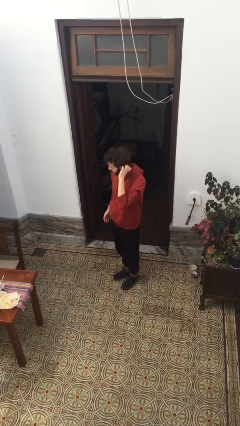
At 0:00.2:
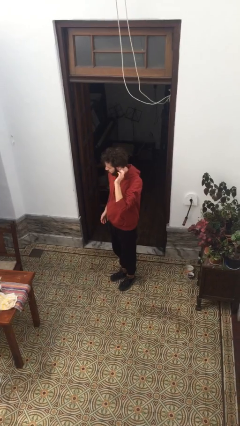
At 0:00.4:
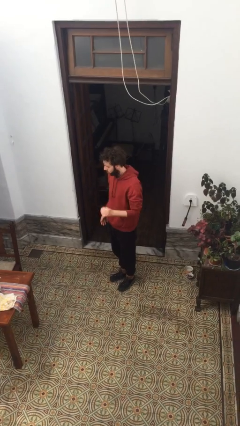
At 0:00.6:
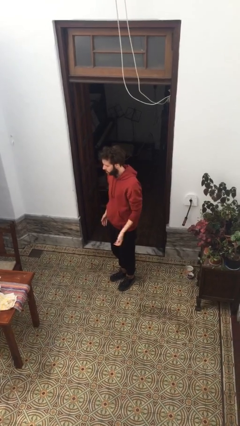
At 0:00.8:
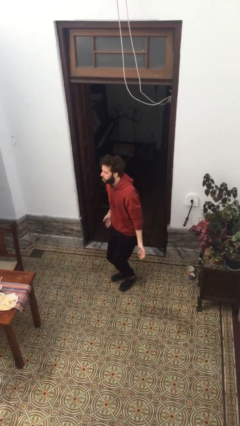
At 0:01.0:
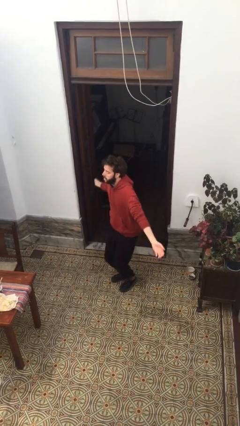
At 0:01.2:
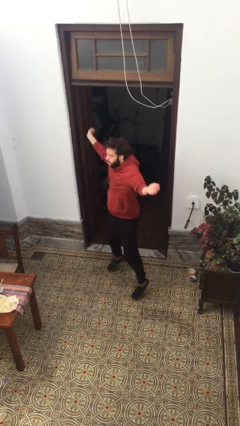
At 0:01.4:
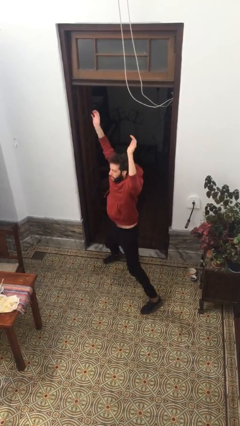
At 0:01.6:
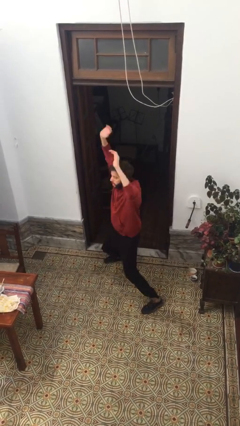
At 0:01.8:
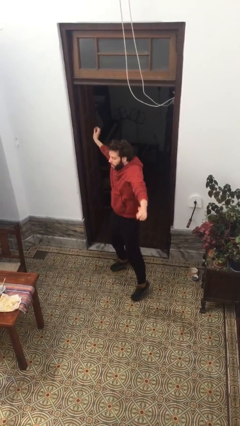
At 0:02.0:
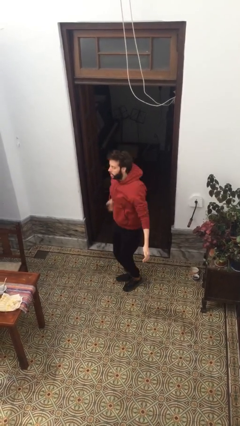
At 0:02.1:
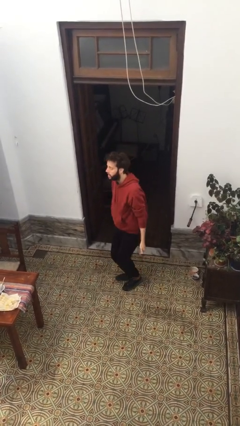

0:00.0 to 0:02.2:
person exercises with jumping jacks

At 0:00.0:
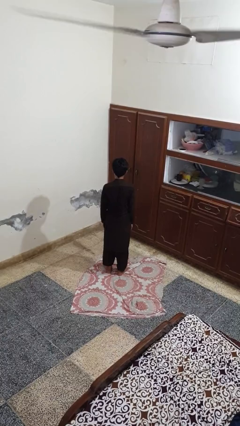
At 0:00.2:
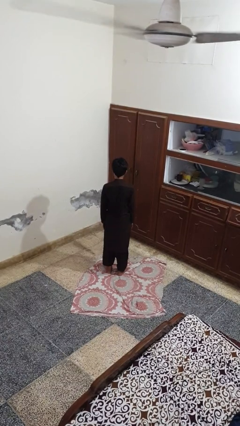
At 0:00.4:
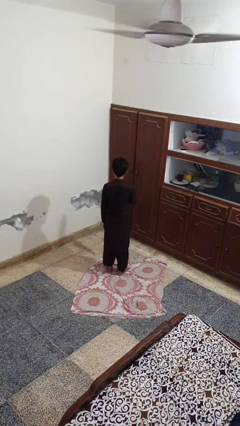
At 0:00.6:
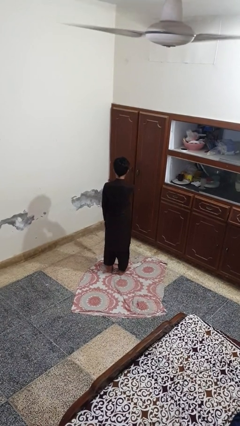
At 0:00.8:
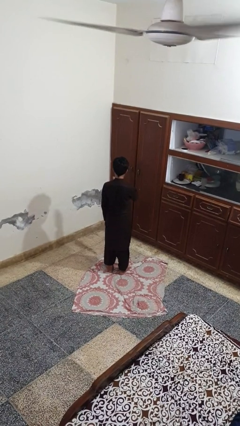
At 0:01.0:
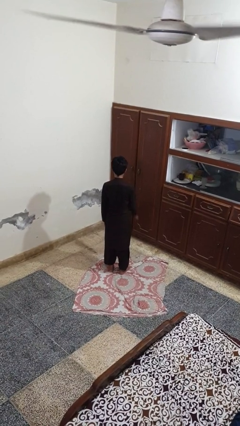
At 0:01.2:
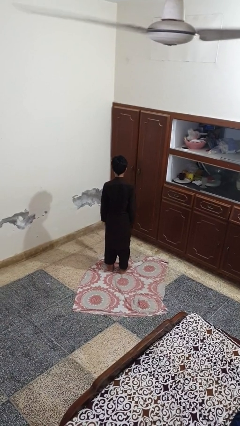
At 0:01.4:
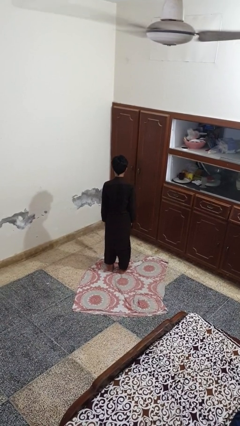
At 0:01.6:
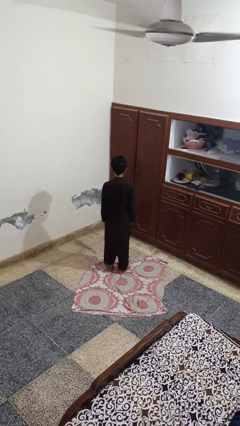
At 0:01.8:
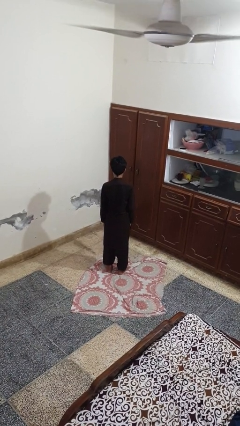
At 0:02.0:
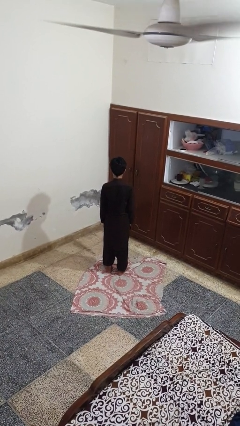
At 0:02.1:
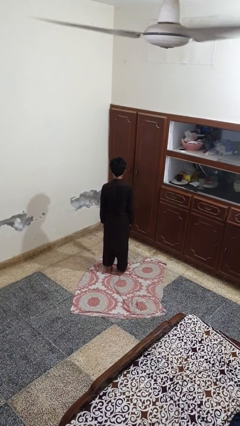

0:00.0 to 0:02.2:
person karate chop

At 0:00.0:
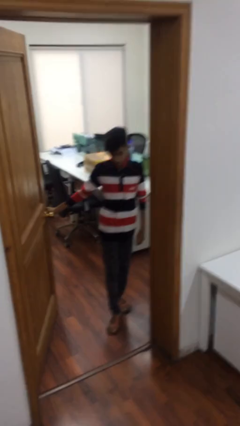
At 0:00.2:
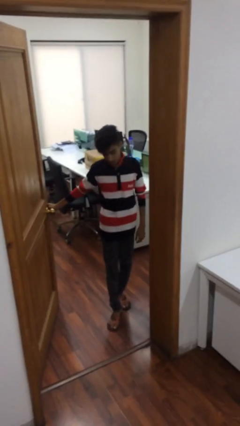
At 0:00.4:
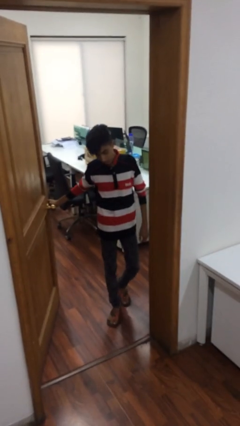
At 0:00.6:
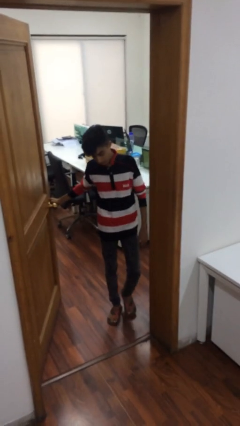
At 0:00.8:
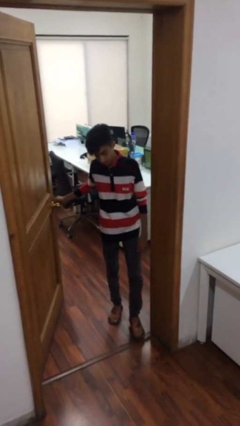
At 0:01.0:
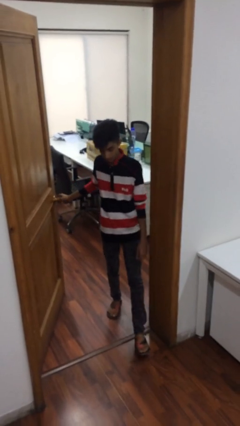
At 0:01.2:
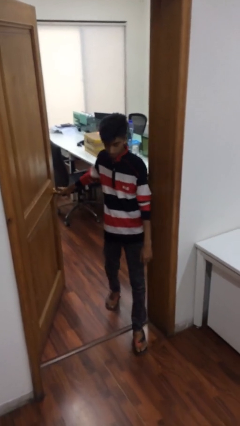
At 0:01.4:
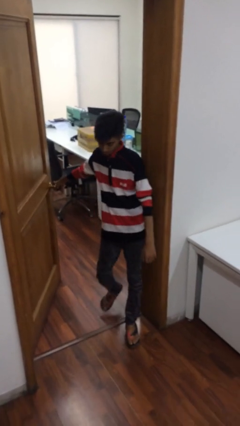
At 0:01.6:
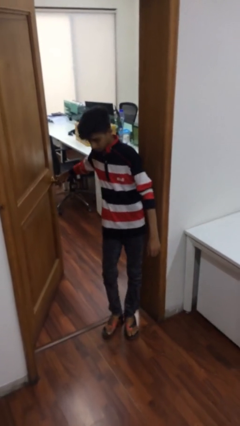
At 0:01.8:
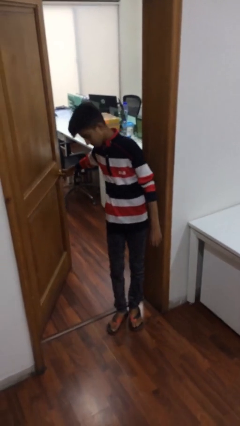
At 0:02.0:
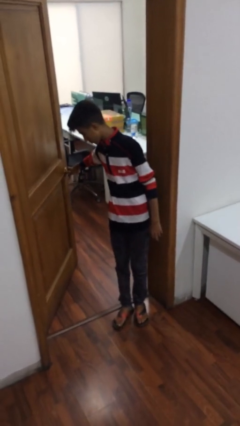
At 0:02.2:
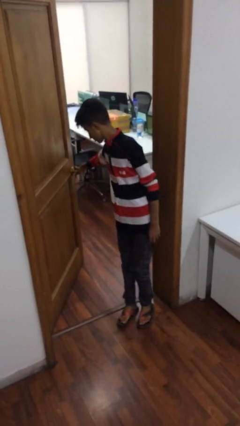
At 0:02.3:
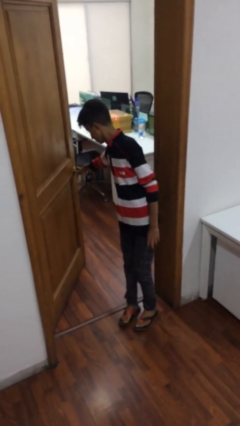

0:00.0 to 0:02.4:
person enters scene through structure

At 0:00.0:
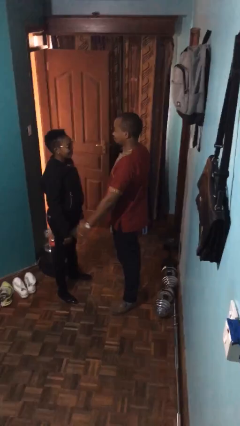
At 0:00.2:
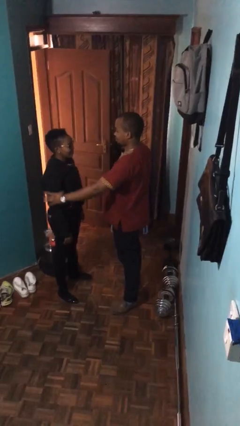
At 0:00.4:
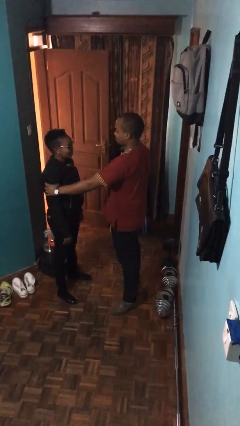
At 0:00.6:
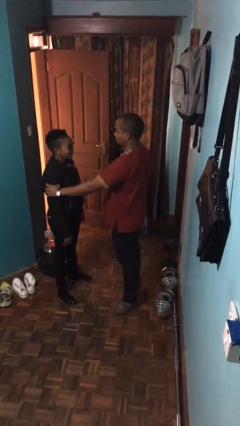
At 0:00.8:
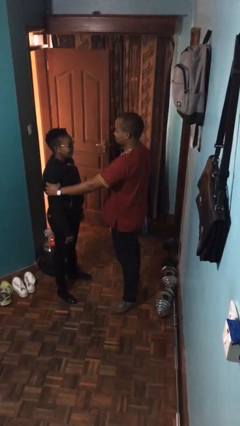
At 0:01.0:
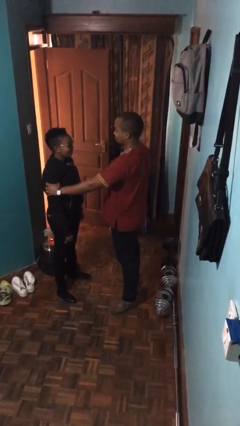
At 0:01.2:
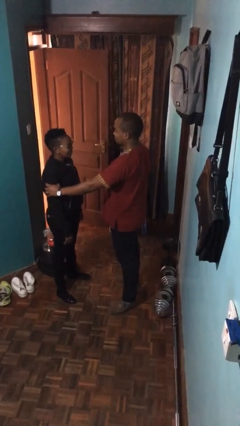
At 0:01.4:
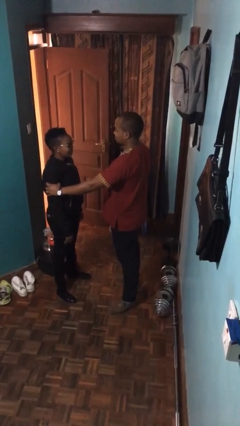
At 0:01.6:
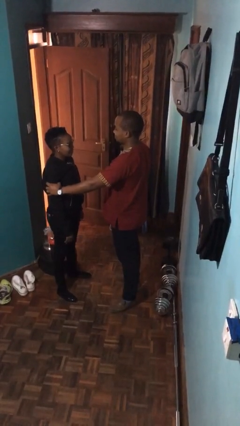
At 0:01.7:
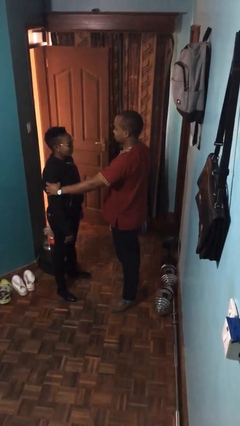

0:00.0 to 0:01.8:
person grabs person by bicep

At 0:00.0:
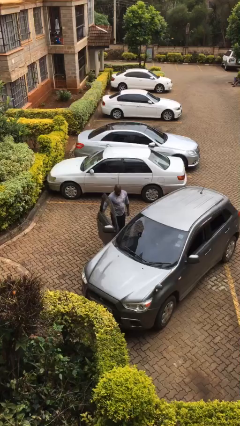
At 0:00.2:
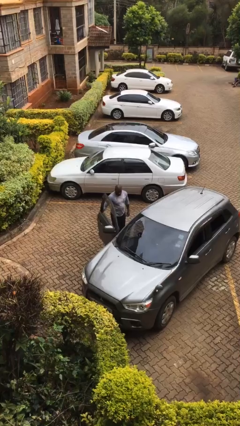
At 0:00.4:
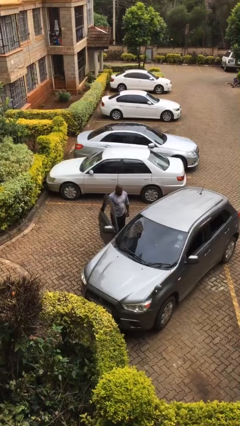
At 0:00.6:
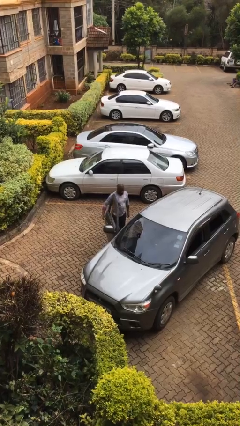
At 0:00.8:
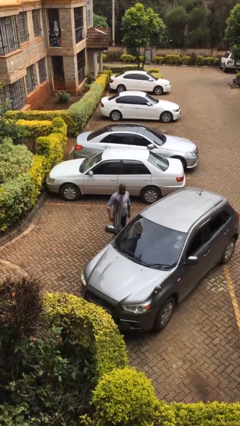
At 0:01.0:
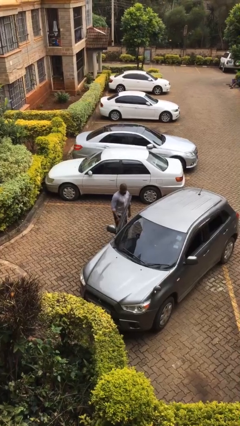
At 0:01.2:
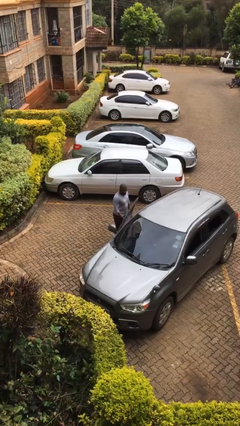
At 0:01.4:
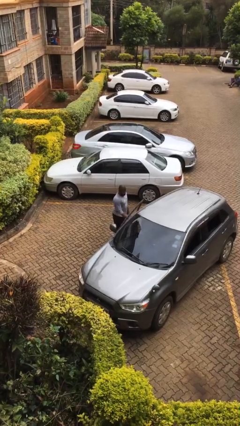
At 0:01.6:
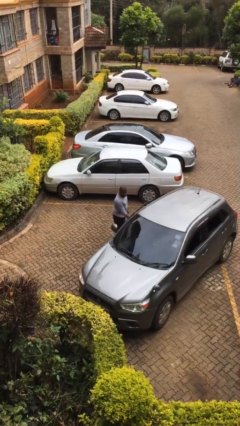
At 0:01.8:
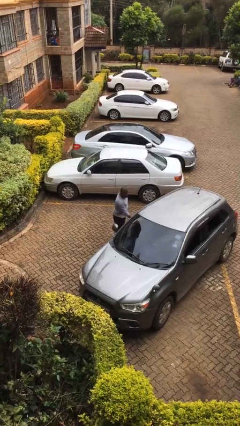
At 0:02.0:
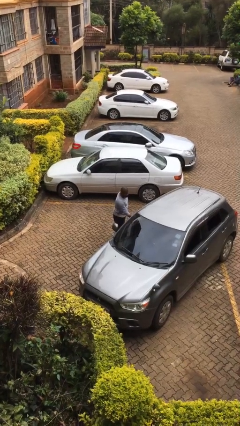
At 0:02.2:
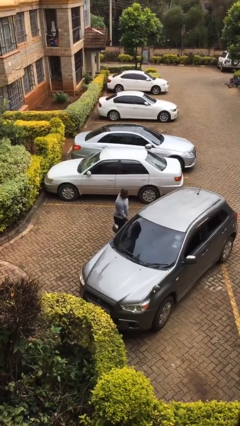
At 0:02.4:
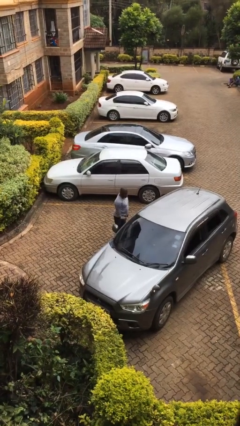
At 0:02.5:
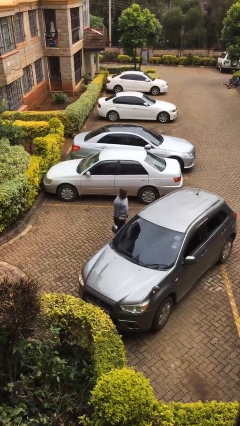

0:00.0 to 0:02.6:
person closes car door

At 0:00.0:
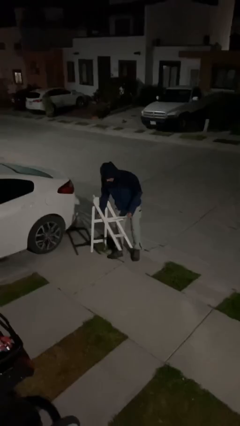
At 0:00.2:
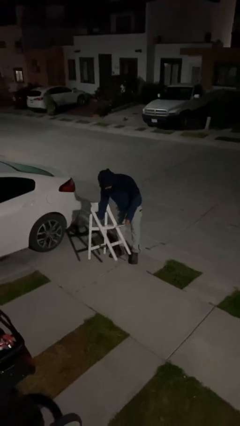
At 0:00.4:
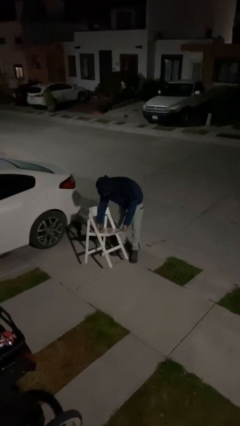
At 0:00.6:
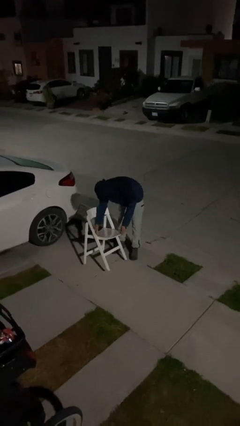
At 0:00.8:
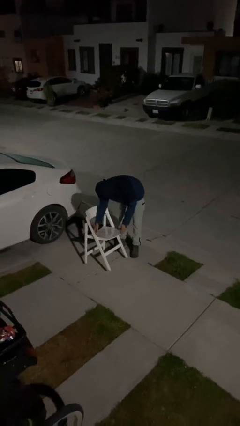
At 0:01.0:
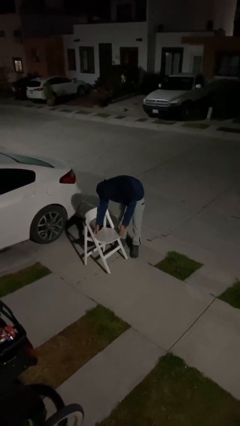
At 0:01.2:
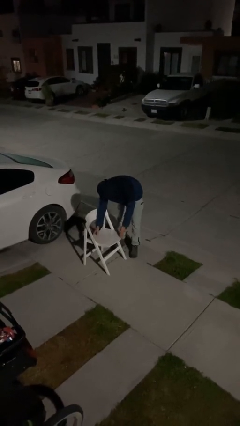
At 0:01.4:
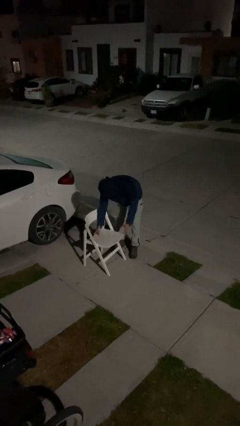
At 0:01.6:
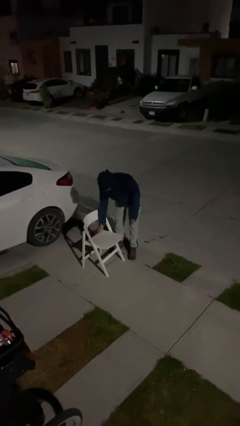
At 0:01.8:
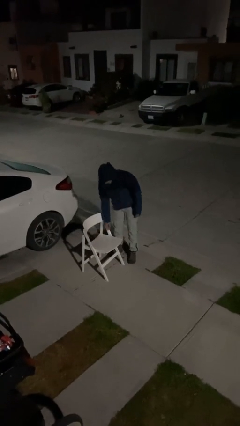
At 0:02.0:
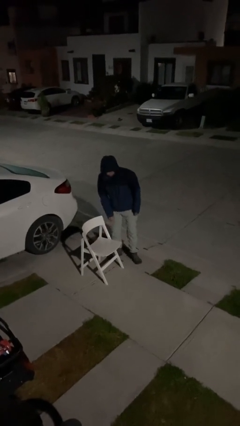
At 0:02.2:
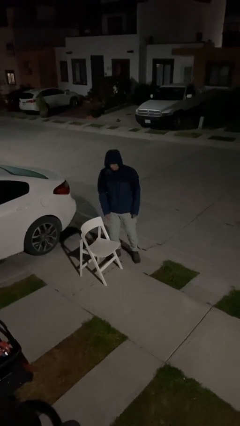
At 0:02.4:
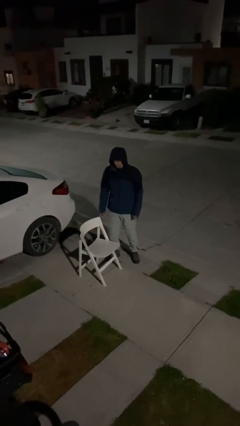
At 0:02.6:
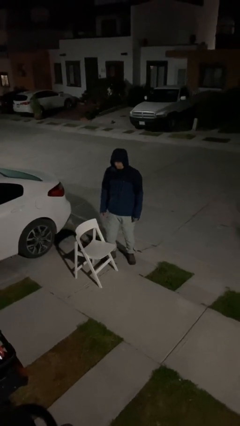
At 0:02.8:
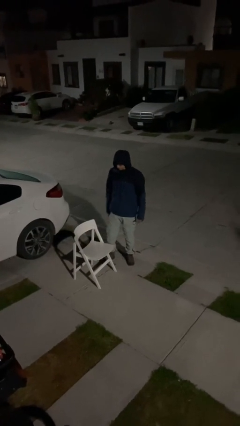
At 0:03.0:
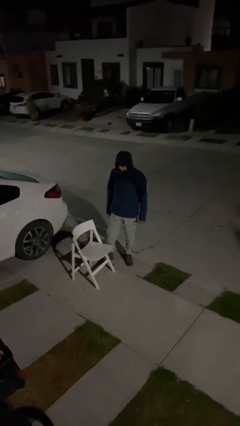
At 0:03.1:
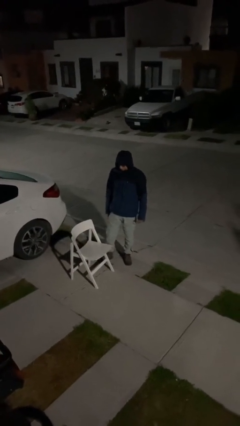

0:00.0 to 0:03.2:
person puts down object on floor

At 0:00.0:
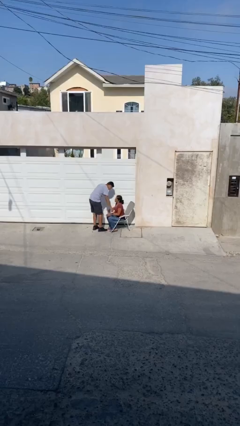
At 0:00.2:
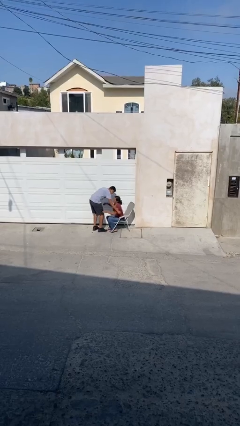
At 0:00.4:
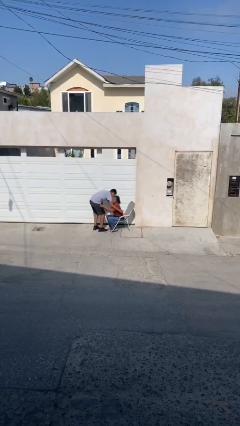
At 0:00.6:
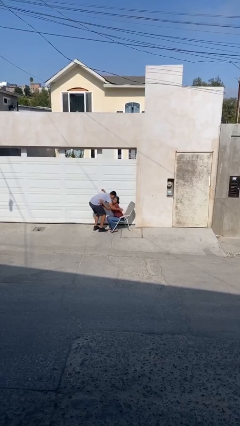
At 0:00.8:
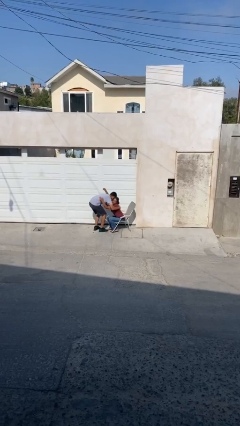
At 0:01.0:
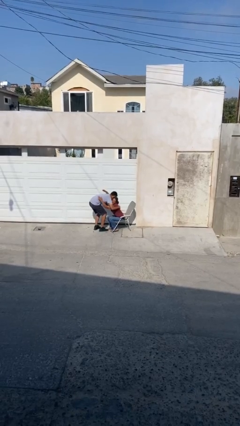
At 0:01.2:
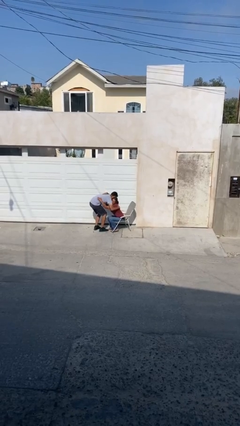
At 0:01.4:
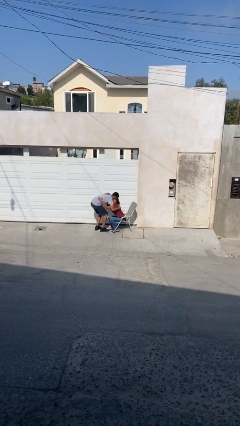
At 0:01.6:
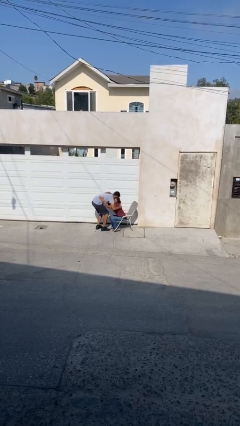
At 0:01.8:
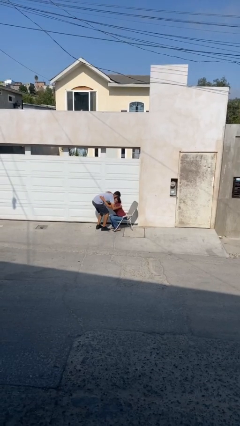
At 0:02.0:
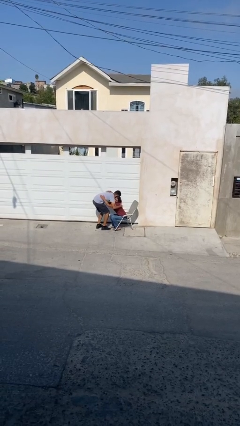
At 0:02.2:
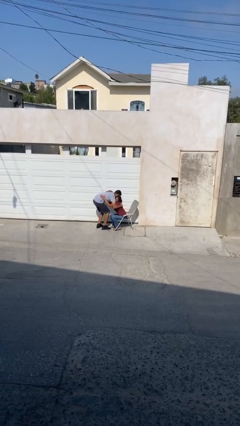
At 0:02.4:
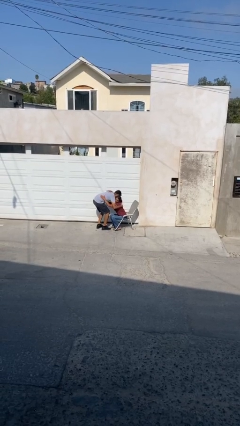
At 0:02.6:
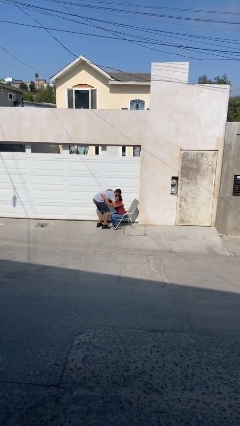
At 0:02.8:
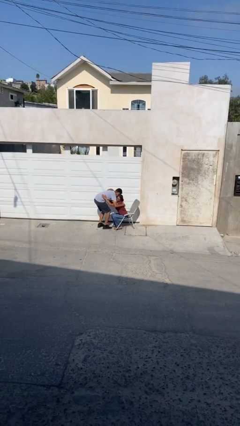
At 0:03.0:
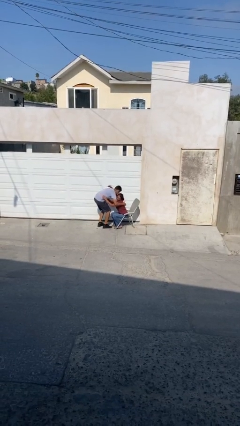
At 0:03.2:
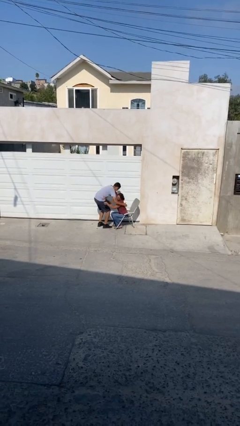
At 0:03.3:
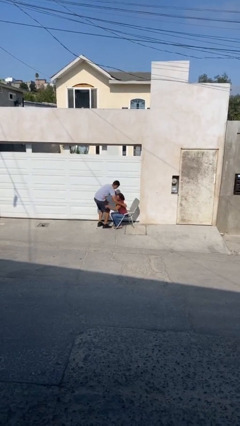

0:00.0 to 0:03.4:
person embraces person
